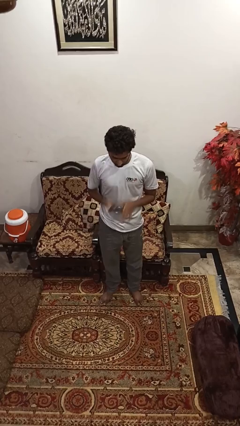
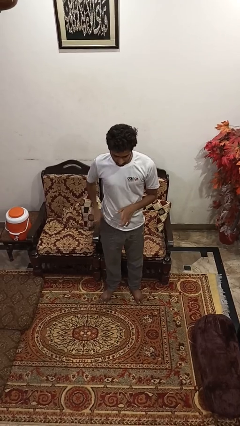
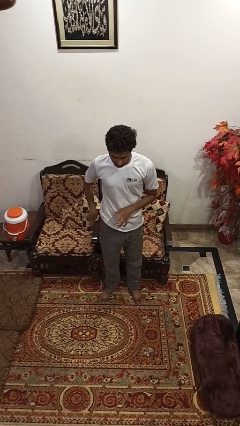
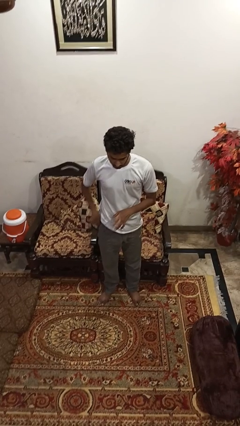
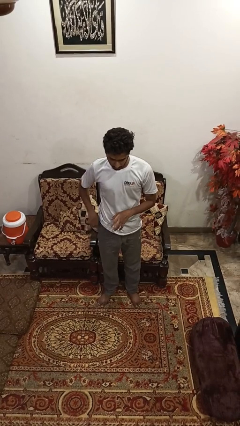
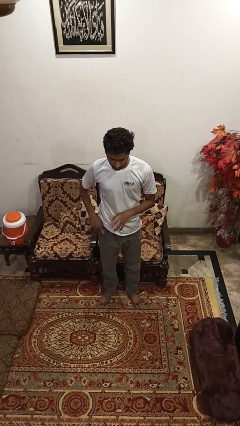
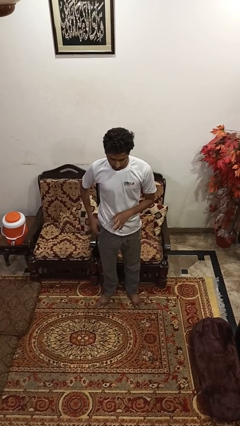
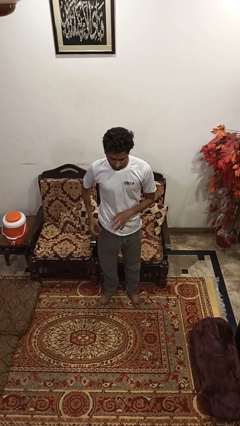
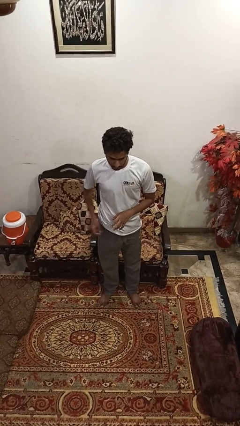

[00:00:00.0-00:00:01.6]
person puts phone into pocket

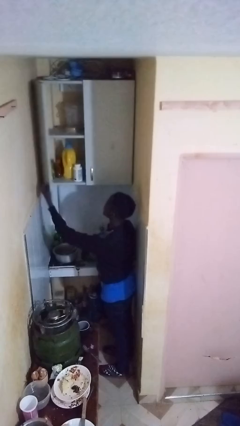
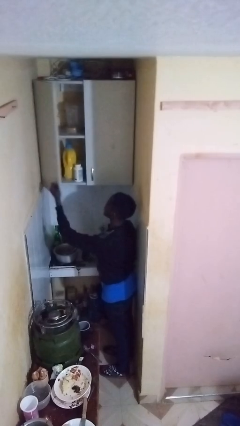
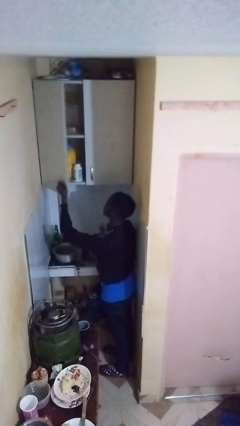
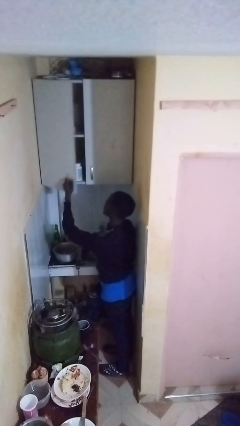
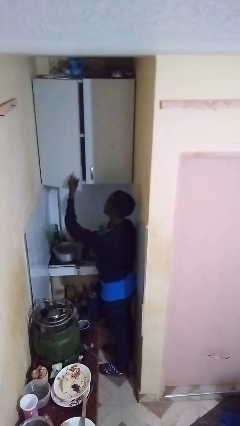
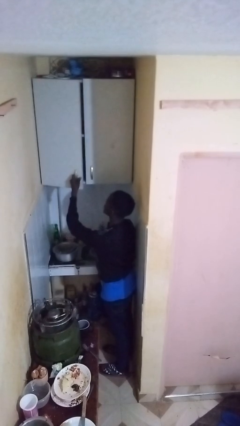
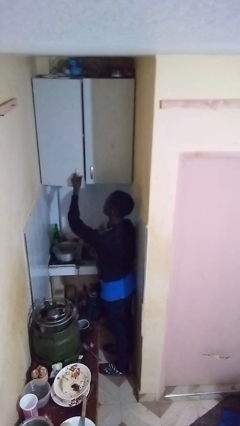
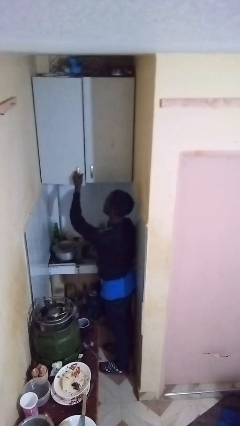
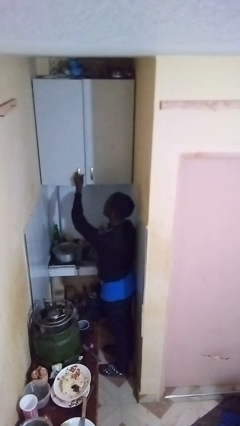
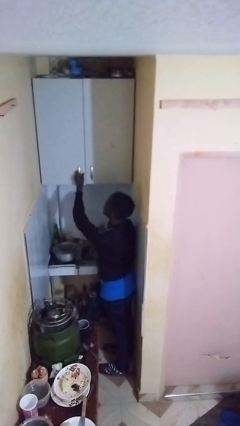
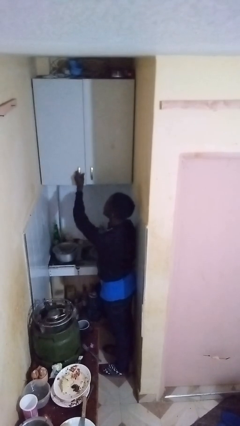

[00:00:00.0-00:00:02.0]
person closes kitchen drawer

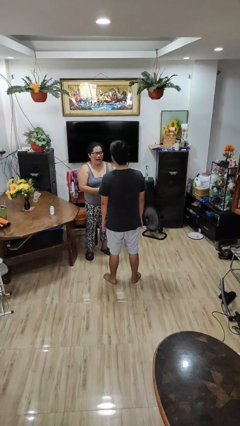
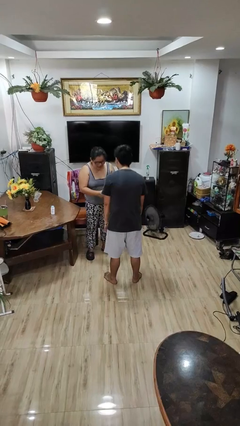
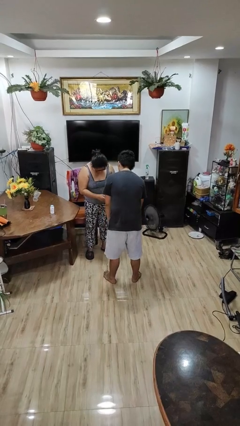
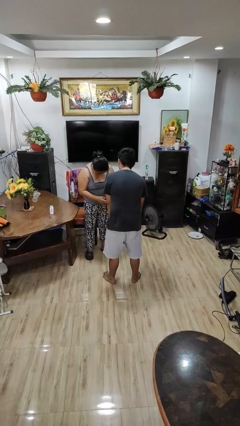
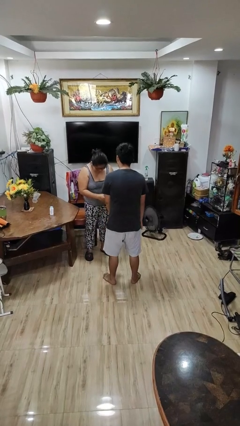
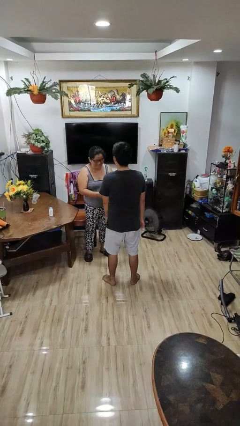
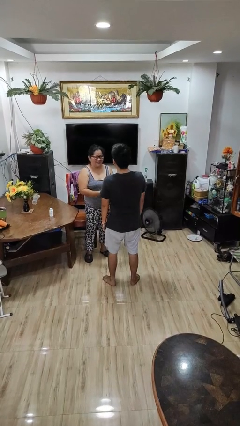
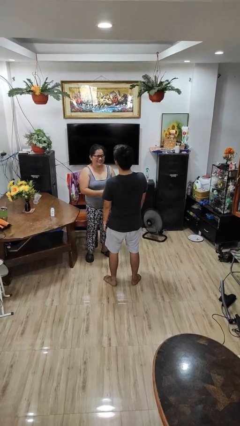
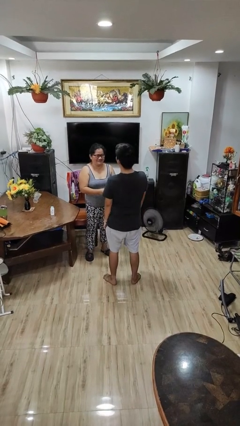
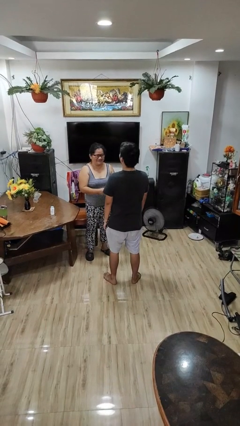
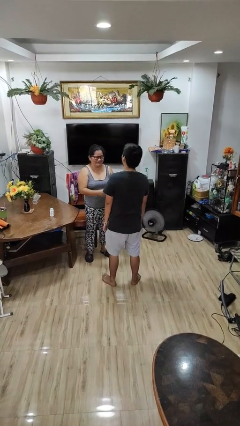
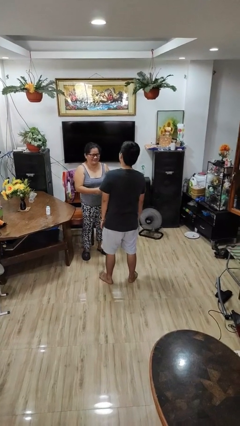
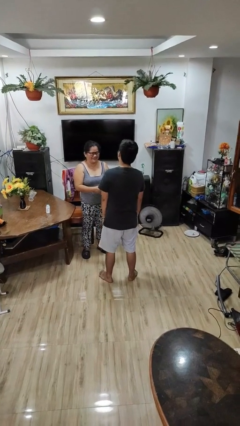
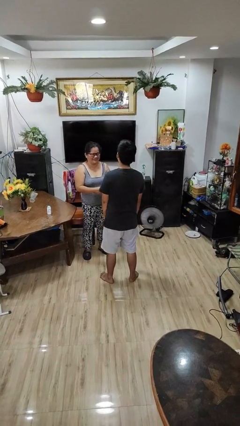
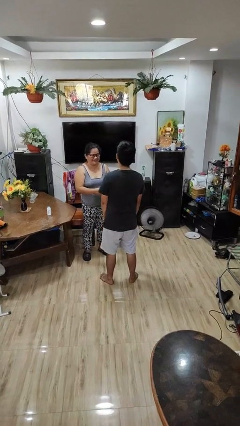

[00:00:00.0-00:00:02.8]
person laughs with person

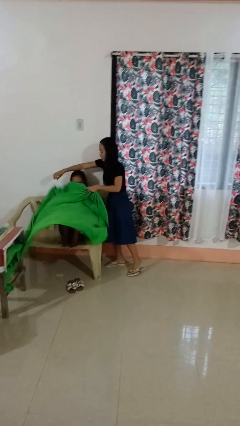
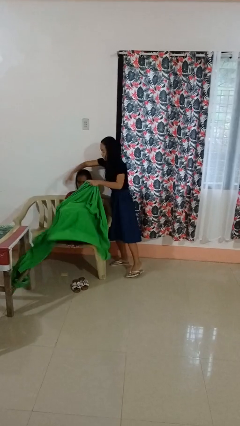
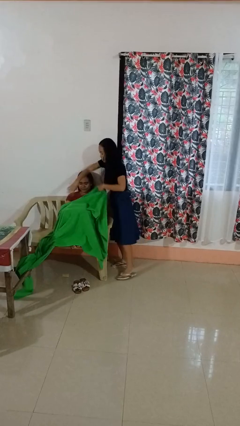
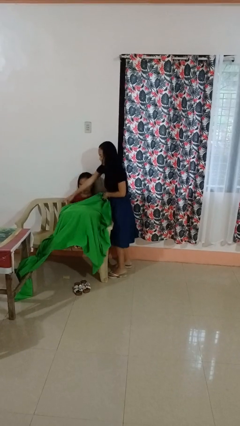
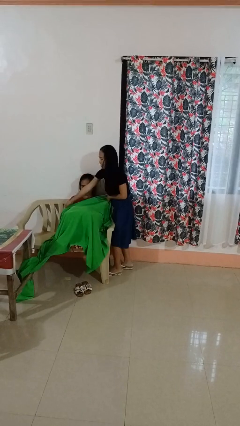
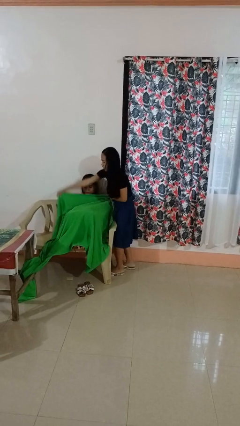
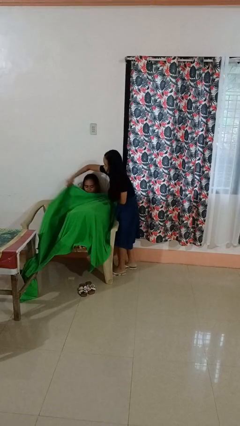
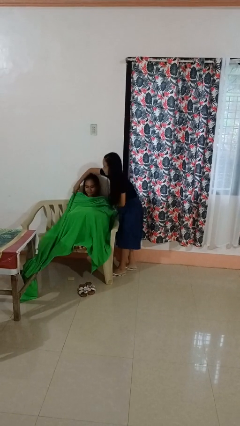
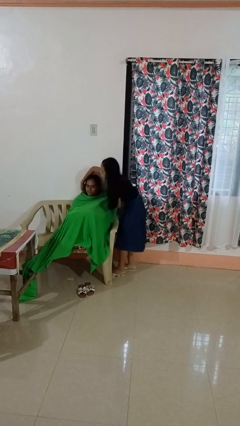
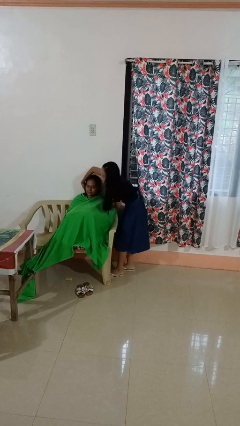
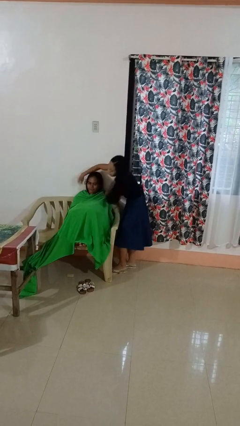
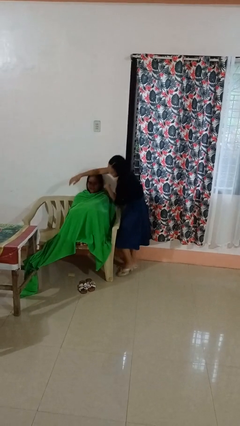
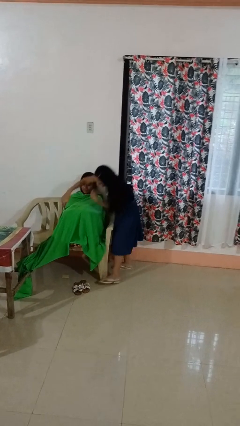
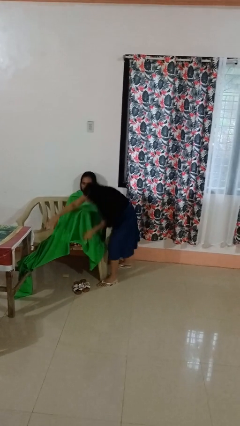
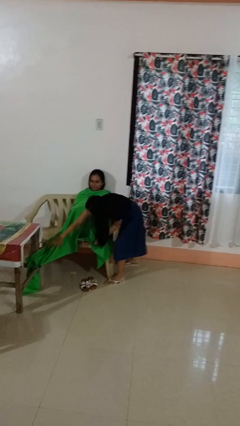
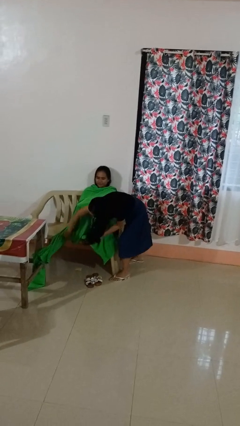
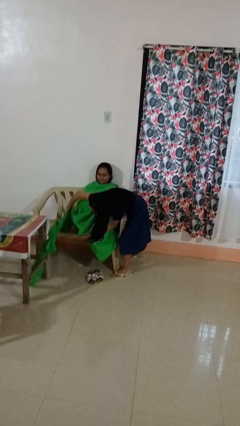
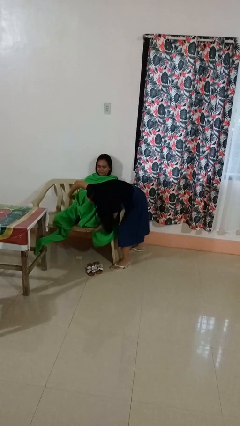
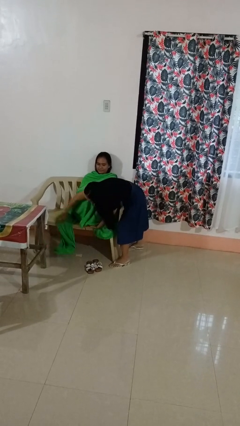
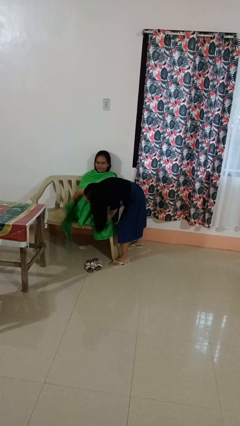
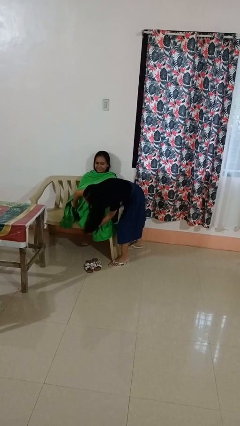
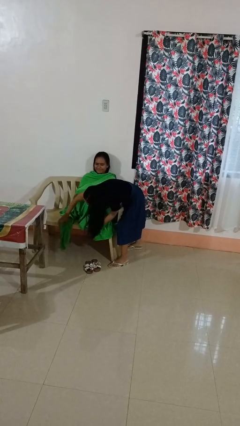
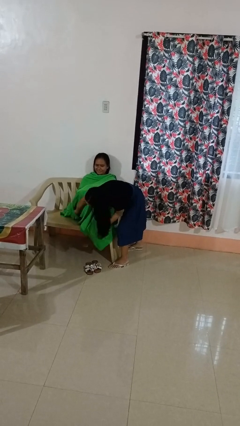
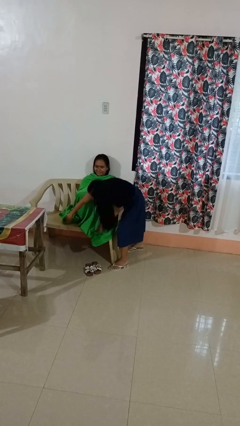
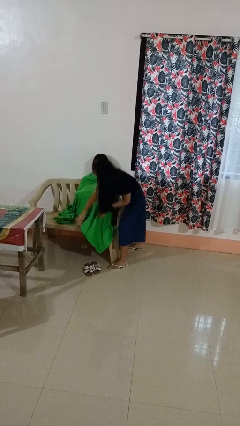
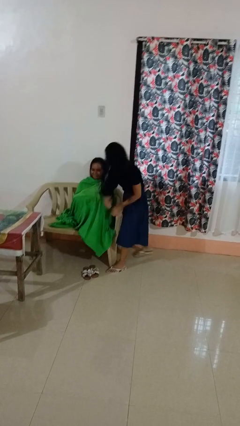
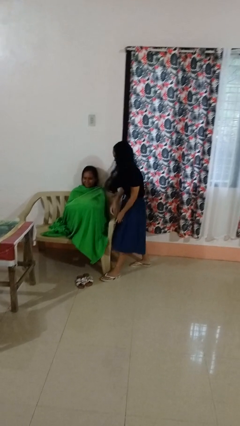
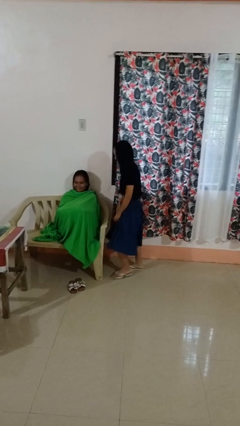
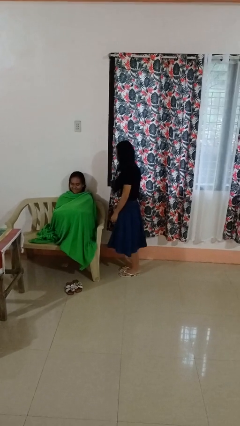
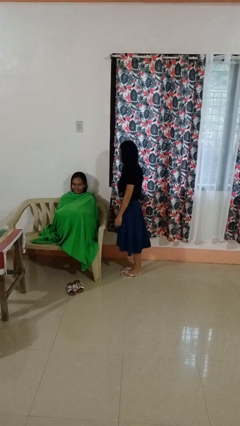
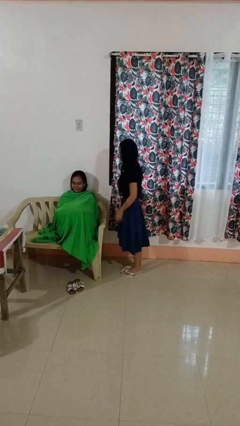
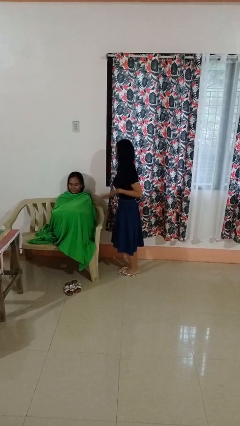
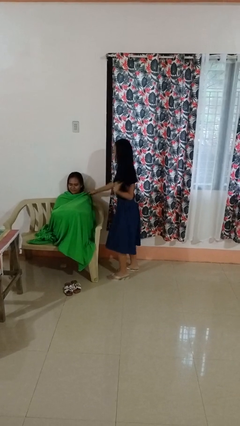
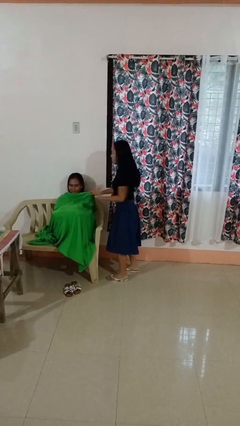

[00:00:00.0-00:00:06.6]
person covers friend with blanket

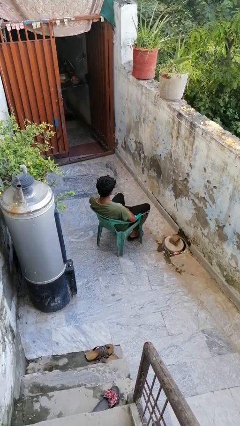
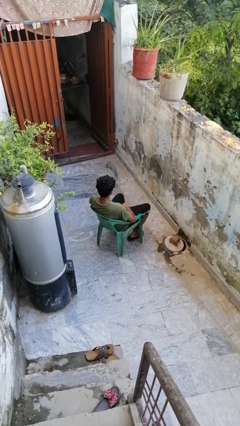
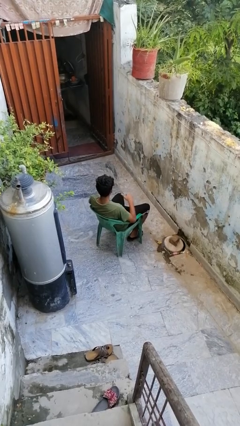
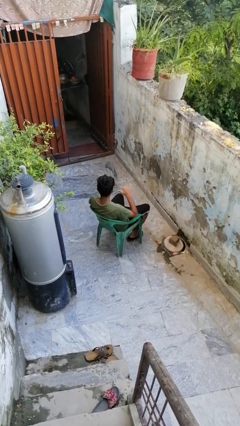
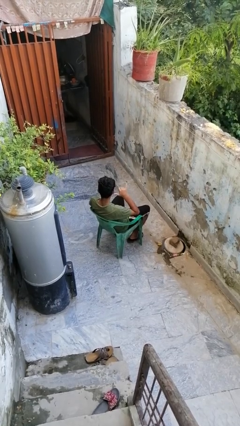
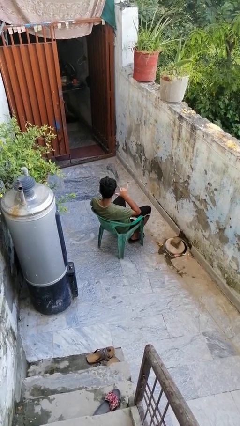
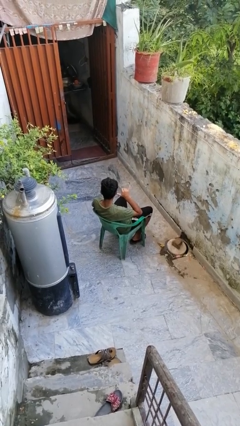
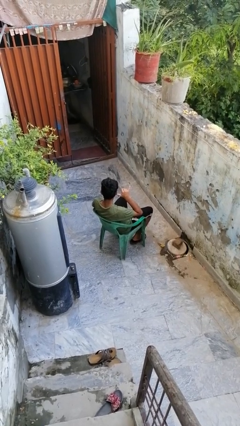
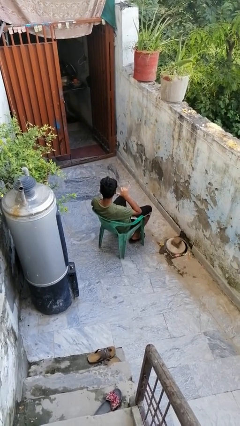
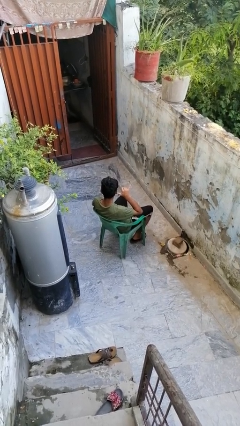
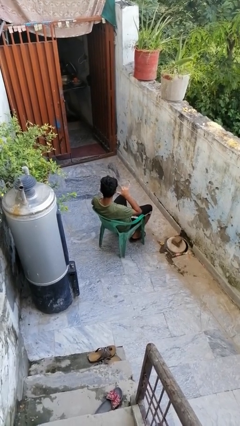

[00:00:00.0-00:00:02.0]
person gestures call me

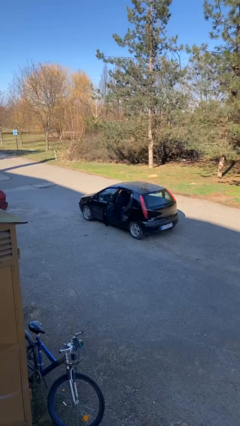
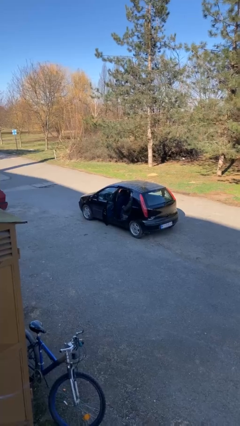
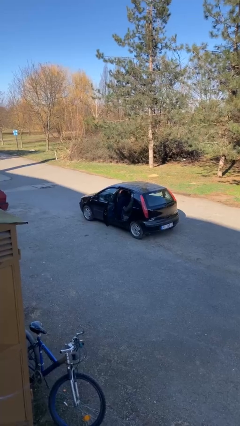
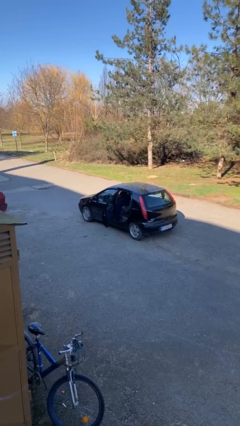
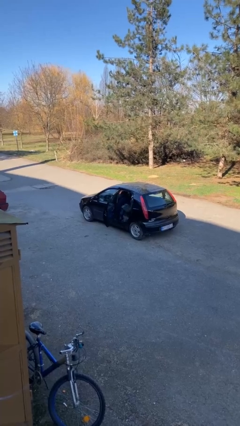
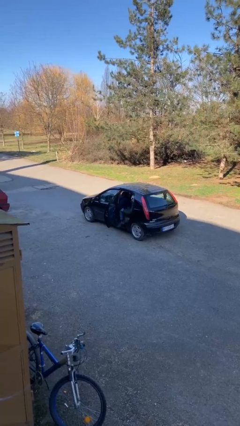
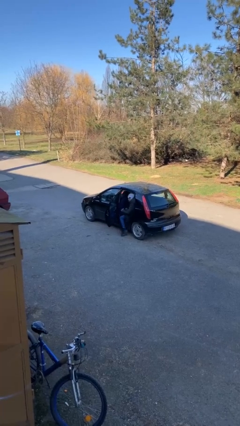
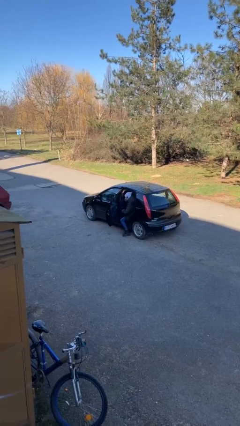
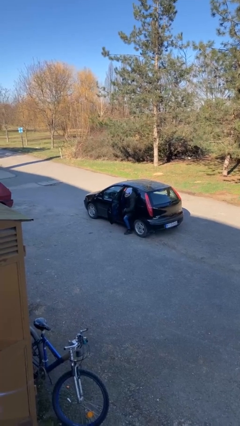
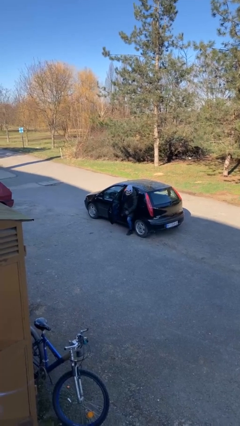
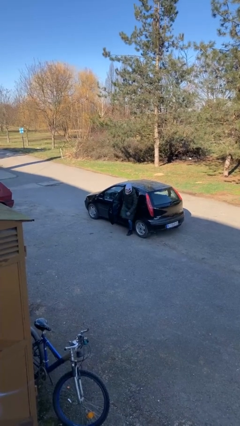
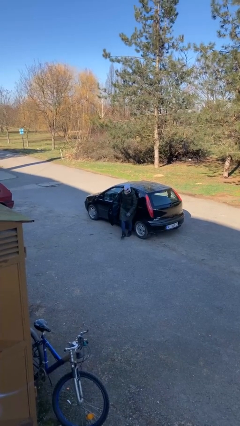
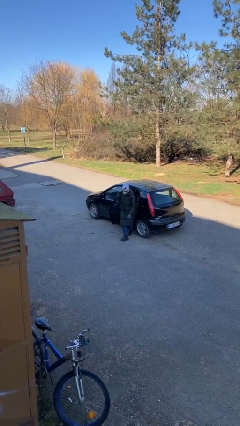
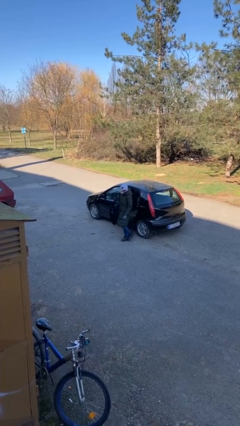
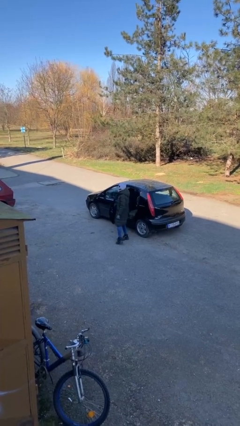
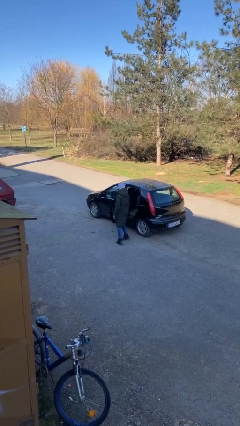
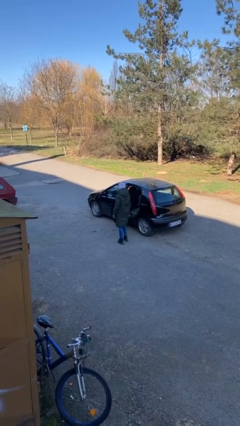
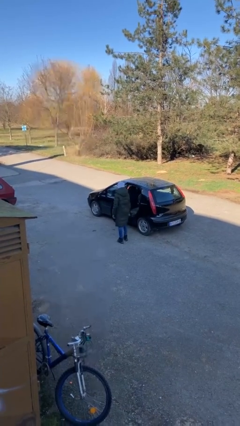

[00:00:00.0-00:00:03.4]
person exits car
